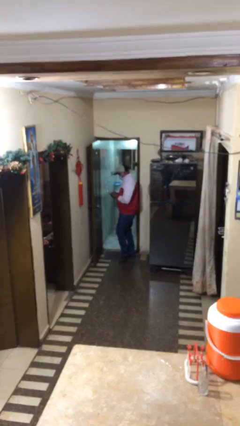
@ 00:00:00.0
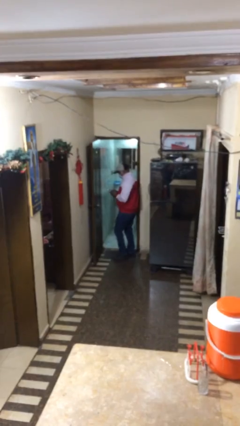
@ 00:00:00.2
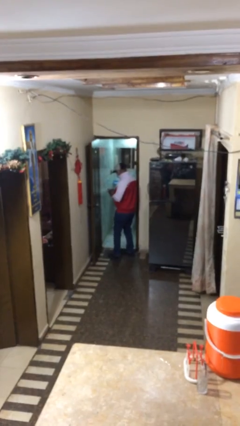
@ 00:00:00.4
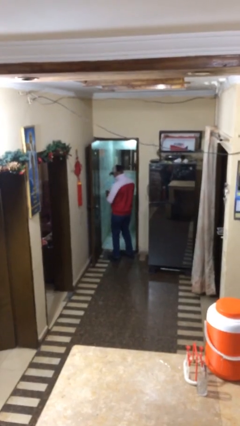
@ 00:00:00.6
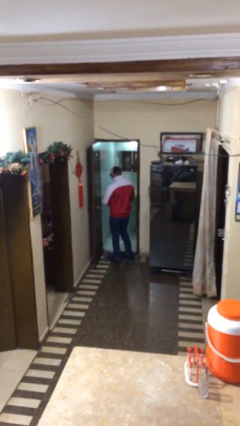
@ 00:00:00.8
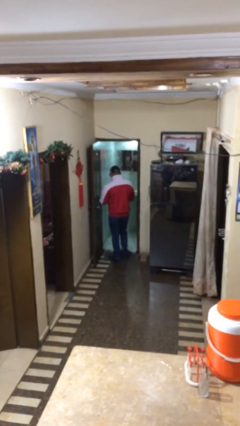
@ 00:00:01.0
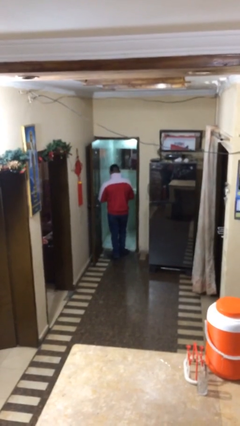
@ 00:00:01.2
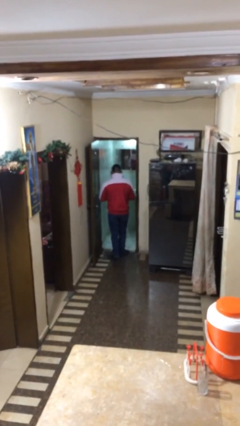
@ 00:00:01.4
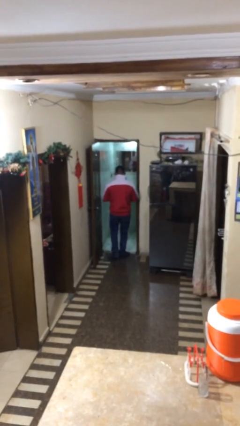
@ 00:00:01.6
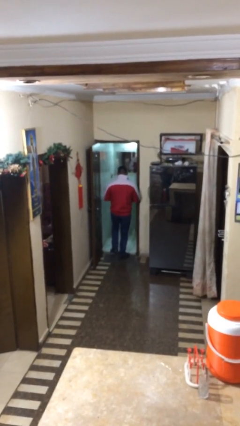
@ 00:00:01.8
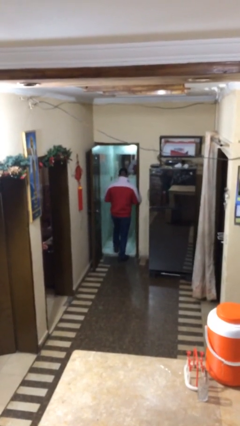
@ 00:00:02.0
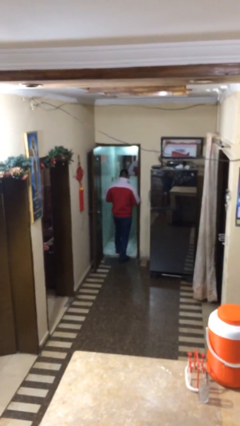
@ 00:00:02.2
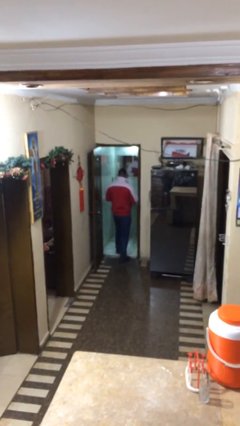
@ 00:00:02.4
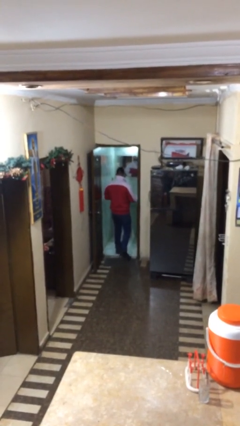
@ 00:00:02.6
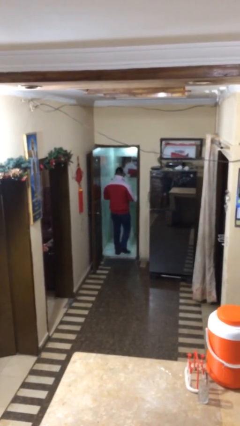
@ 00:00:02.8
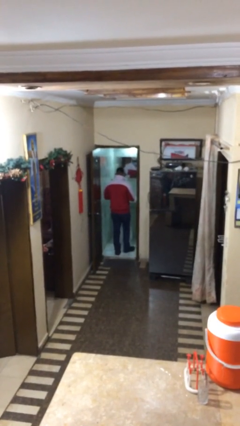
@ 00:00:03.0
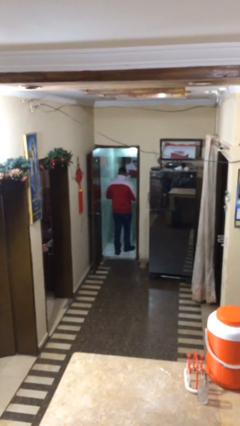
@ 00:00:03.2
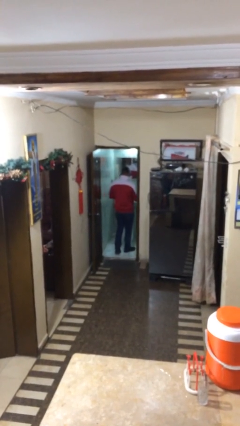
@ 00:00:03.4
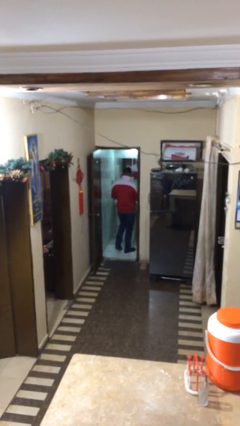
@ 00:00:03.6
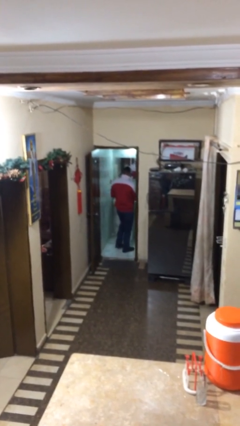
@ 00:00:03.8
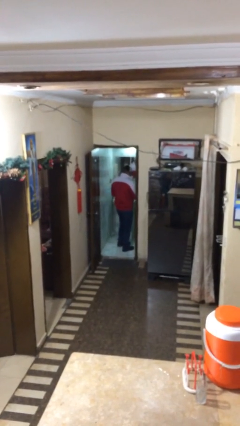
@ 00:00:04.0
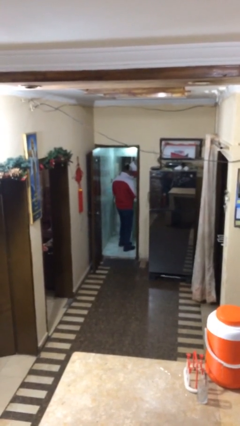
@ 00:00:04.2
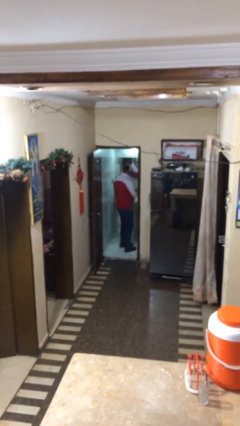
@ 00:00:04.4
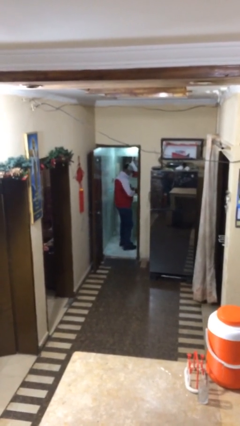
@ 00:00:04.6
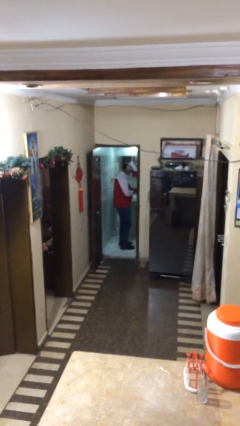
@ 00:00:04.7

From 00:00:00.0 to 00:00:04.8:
person exits scene through structure

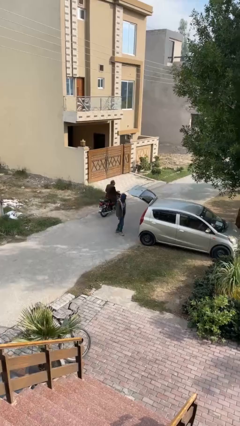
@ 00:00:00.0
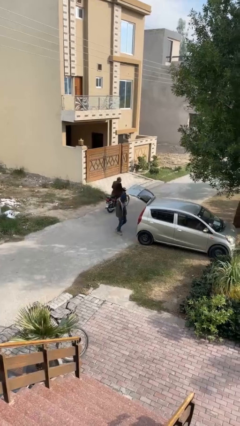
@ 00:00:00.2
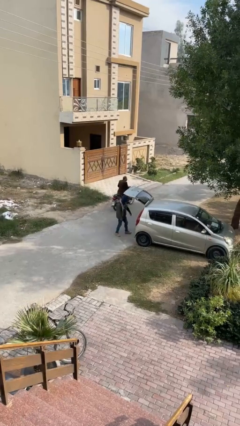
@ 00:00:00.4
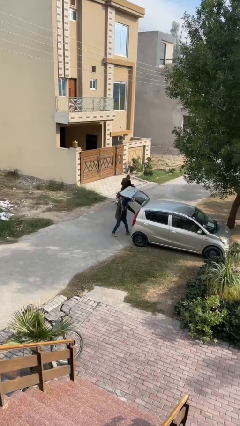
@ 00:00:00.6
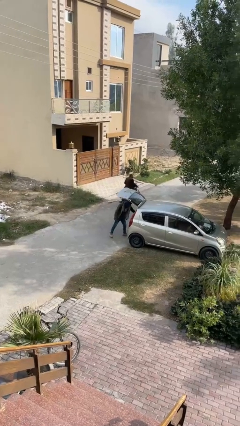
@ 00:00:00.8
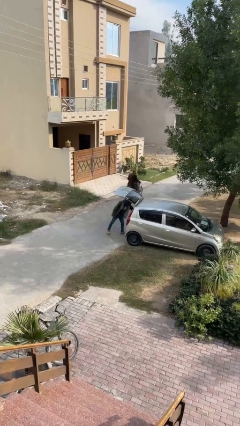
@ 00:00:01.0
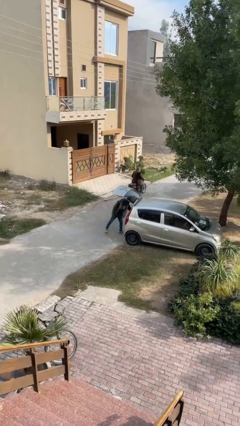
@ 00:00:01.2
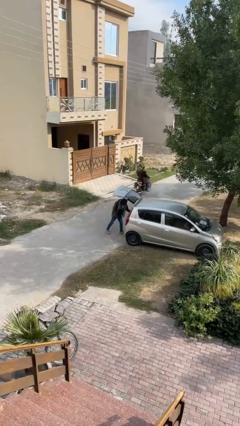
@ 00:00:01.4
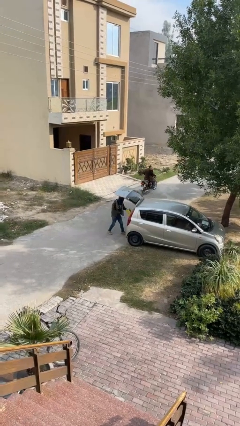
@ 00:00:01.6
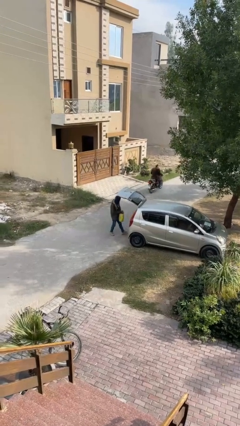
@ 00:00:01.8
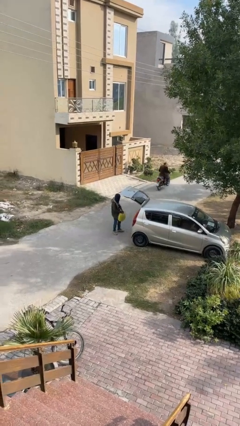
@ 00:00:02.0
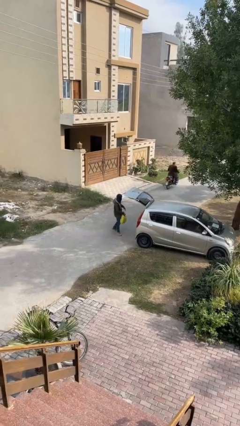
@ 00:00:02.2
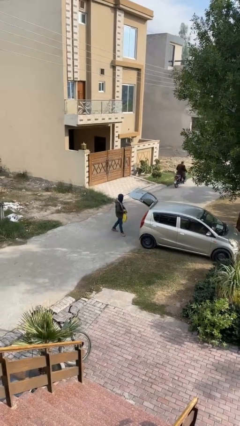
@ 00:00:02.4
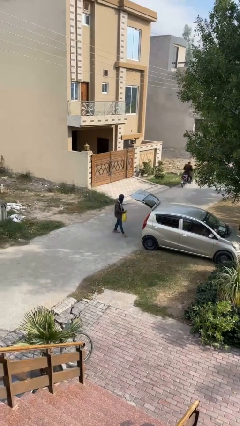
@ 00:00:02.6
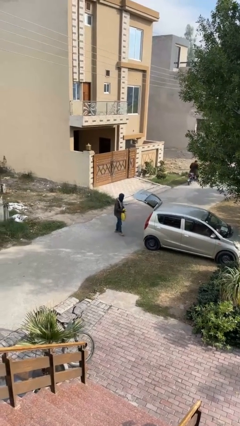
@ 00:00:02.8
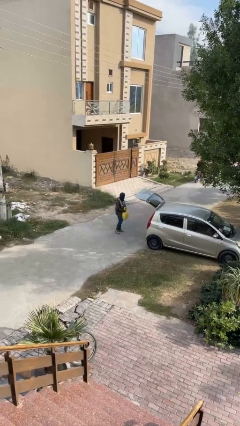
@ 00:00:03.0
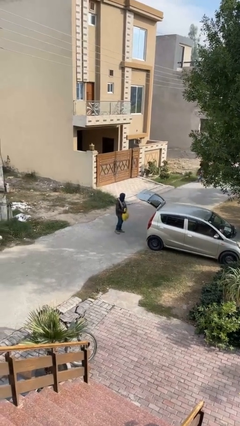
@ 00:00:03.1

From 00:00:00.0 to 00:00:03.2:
person unloads car

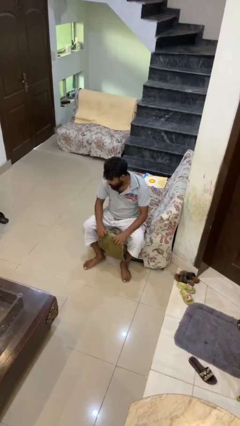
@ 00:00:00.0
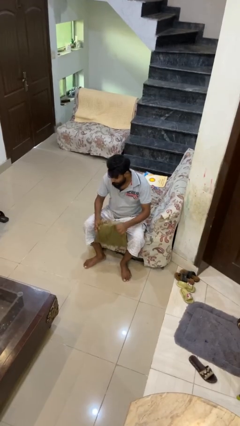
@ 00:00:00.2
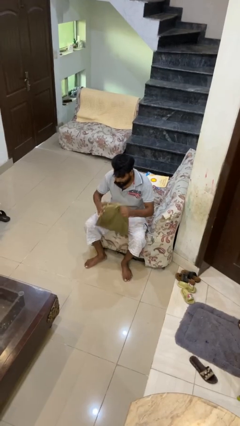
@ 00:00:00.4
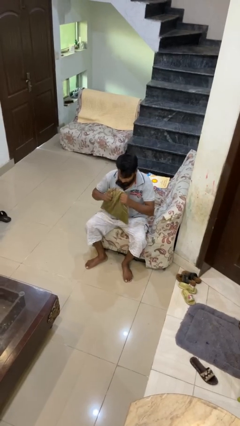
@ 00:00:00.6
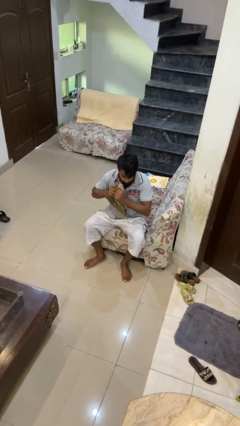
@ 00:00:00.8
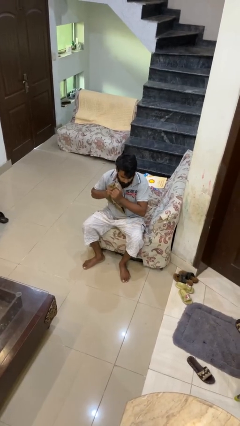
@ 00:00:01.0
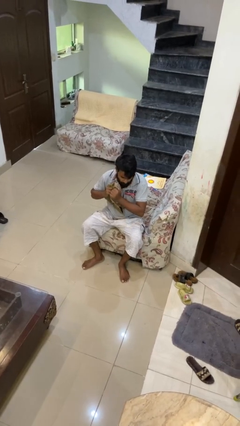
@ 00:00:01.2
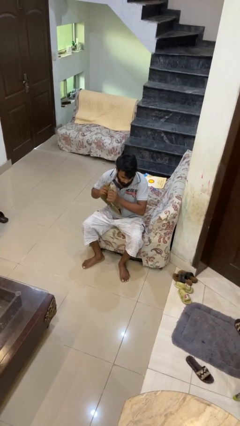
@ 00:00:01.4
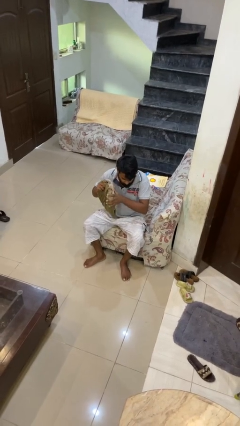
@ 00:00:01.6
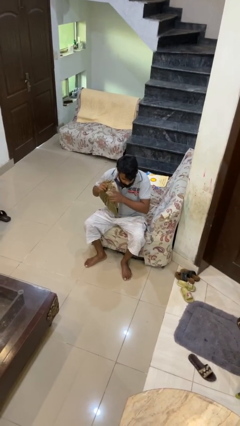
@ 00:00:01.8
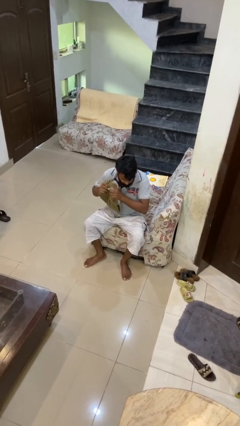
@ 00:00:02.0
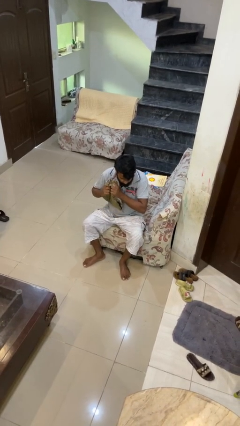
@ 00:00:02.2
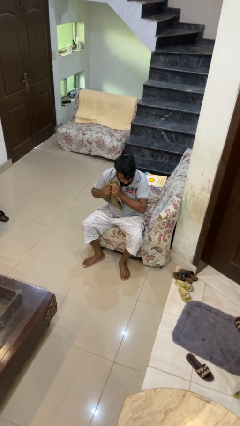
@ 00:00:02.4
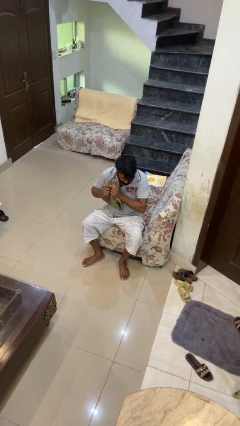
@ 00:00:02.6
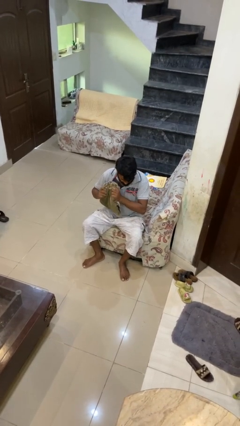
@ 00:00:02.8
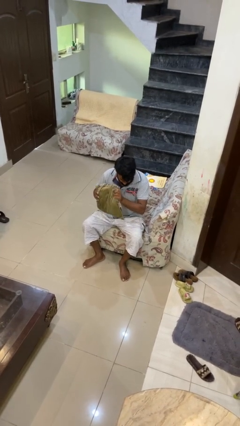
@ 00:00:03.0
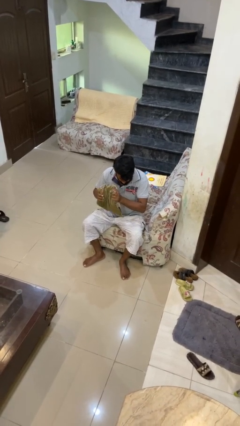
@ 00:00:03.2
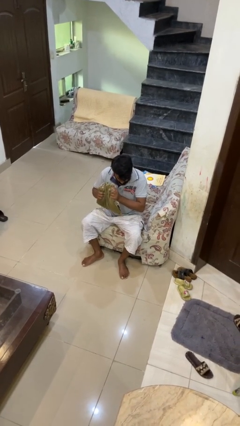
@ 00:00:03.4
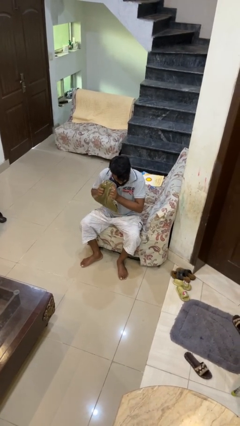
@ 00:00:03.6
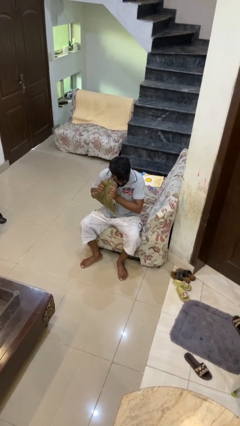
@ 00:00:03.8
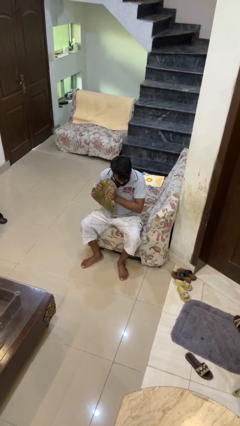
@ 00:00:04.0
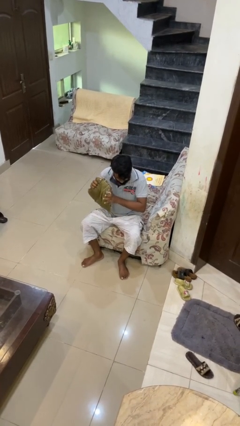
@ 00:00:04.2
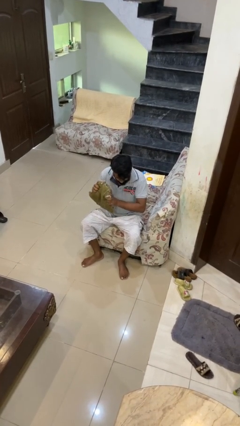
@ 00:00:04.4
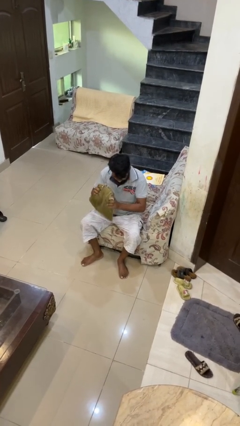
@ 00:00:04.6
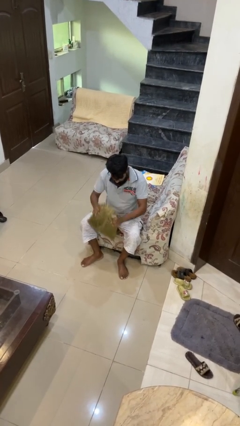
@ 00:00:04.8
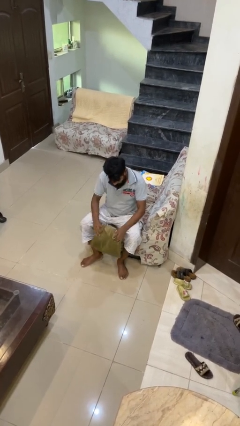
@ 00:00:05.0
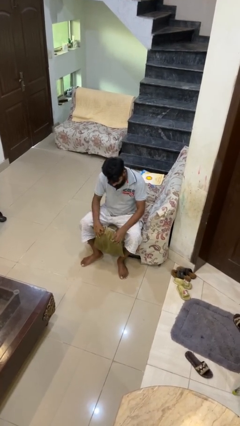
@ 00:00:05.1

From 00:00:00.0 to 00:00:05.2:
person squeezes object

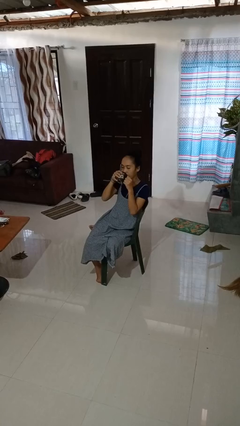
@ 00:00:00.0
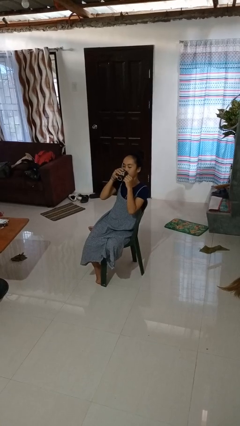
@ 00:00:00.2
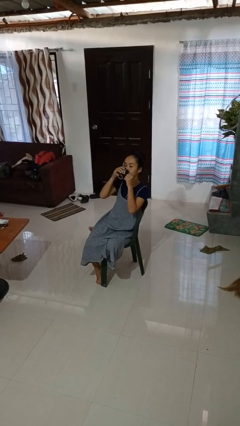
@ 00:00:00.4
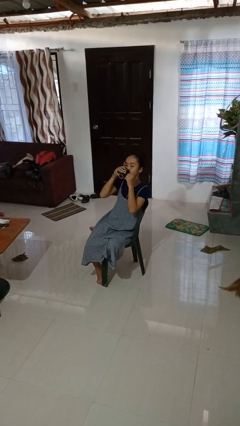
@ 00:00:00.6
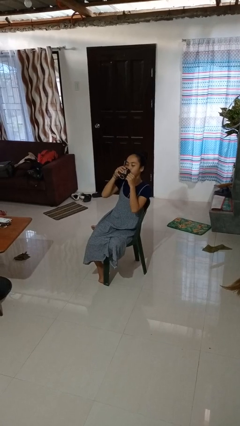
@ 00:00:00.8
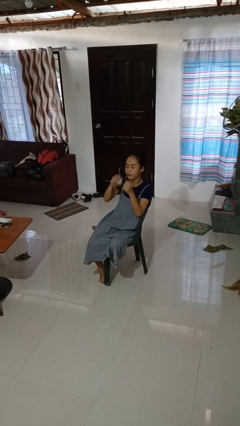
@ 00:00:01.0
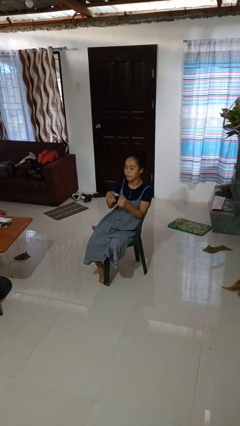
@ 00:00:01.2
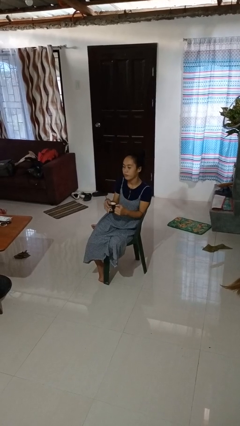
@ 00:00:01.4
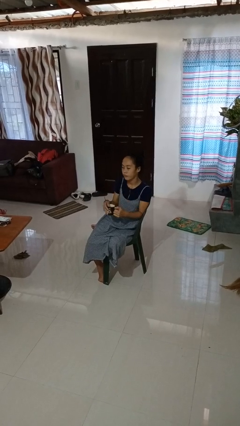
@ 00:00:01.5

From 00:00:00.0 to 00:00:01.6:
person drinks from mug

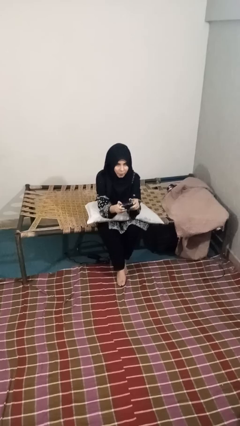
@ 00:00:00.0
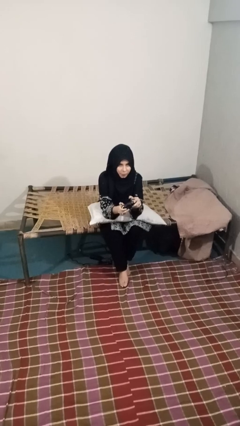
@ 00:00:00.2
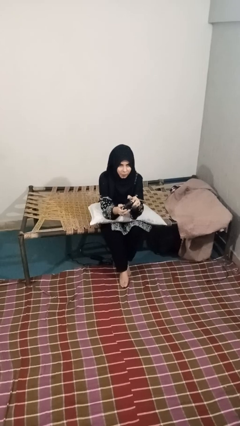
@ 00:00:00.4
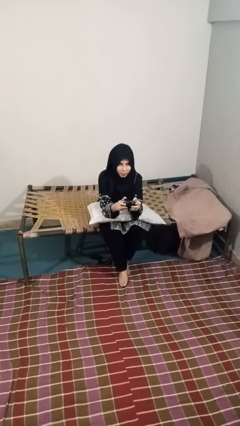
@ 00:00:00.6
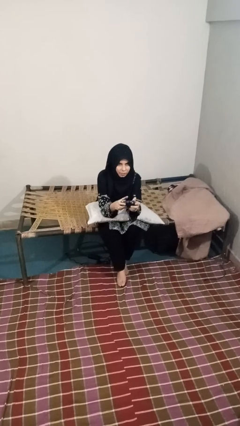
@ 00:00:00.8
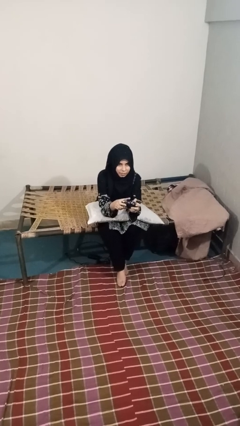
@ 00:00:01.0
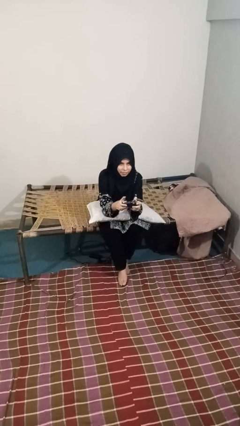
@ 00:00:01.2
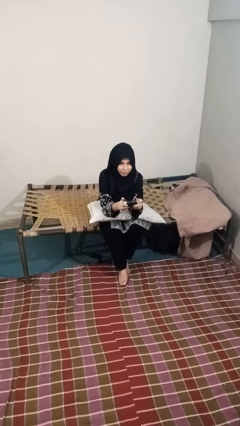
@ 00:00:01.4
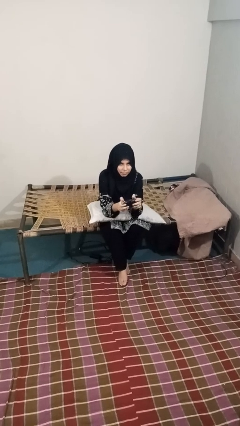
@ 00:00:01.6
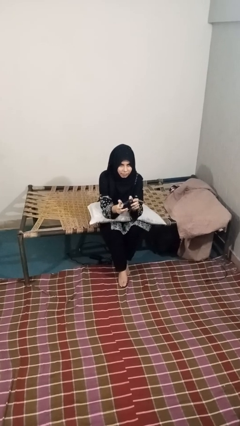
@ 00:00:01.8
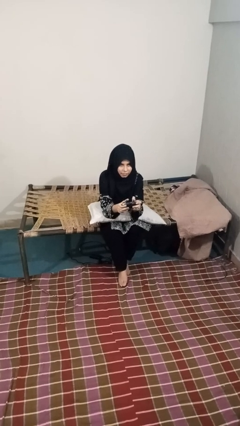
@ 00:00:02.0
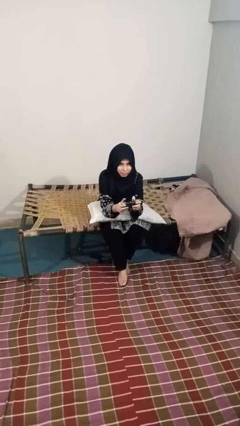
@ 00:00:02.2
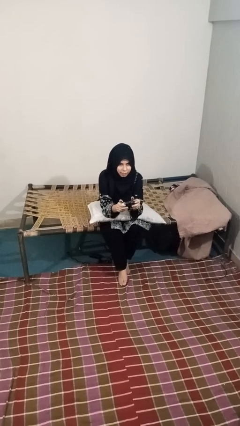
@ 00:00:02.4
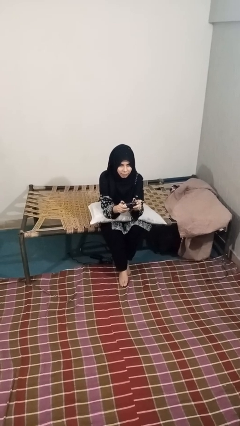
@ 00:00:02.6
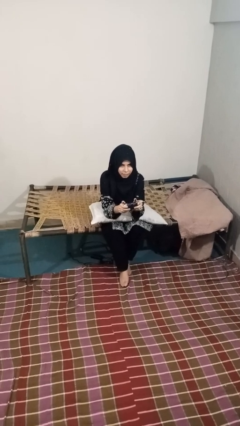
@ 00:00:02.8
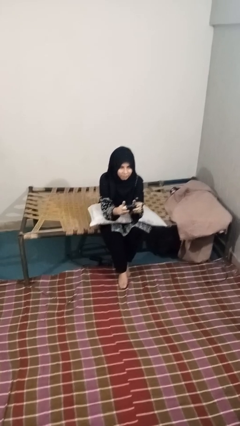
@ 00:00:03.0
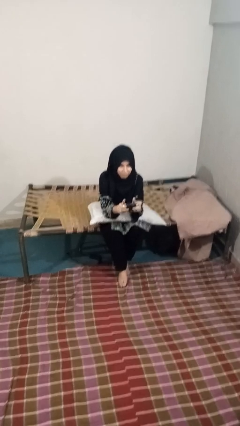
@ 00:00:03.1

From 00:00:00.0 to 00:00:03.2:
person interacts with handheld game
